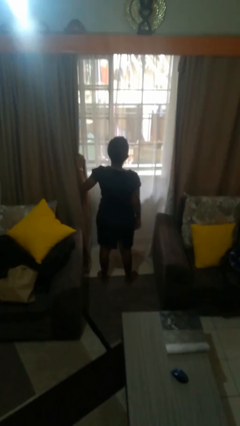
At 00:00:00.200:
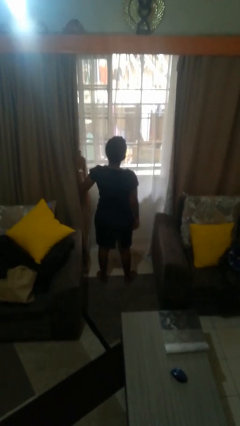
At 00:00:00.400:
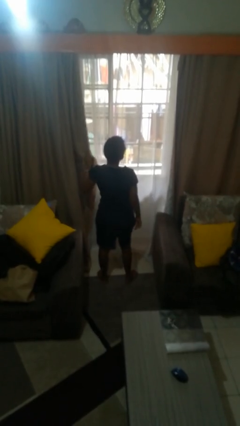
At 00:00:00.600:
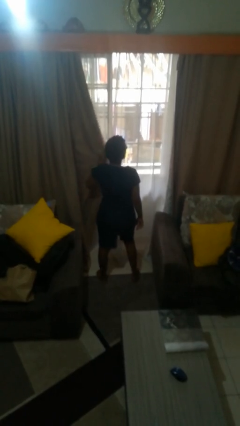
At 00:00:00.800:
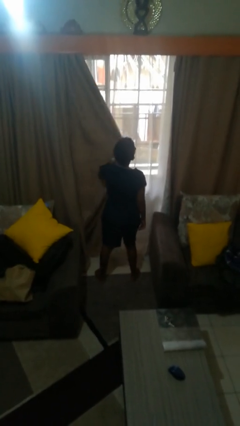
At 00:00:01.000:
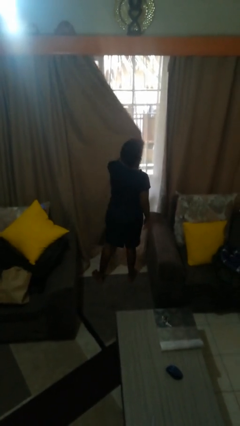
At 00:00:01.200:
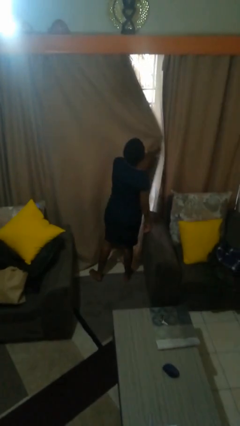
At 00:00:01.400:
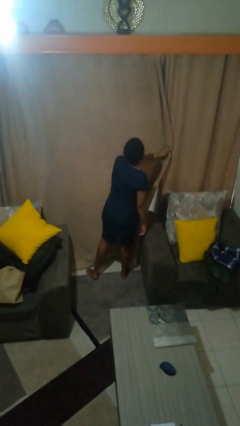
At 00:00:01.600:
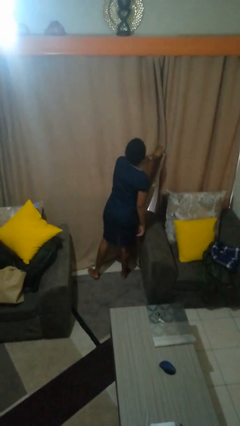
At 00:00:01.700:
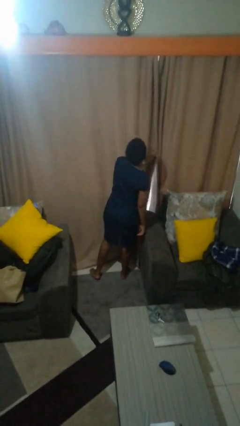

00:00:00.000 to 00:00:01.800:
person closes curtains

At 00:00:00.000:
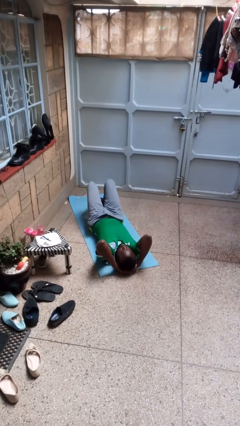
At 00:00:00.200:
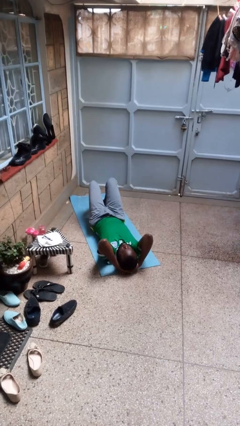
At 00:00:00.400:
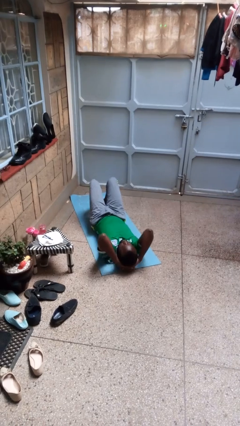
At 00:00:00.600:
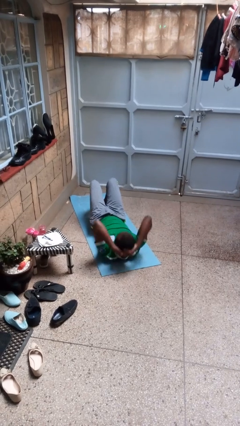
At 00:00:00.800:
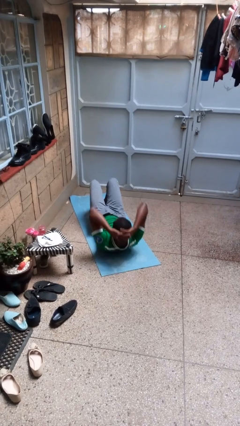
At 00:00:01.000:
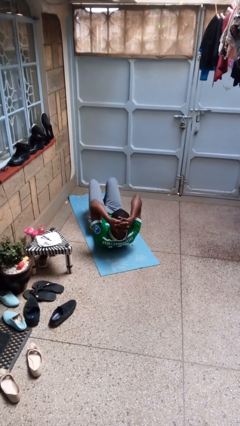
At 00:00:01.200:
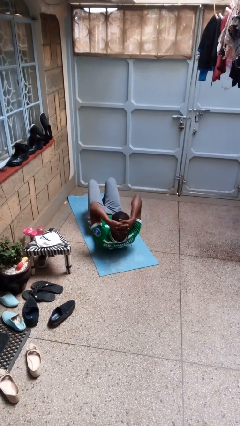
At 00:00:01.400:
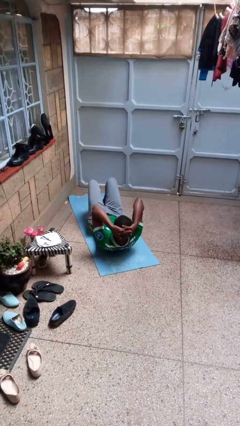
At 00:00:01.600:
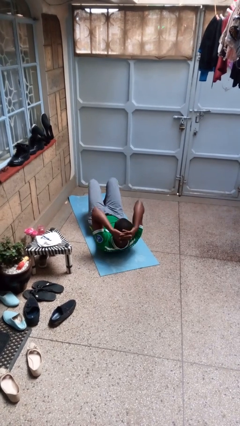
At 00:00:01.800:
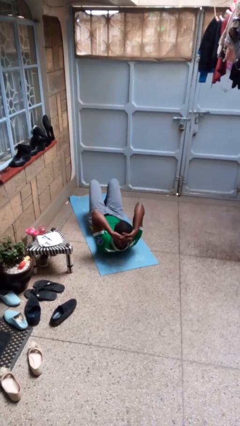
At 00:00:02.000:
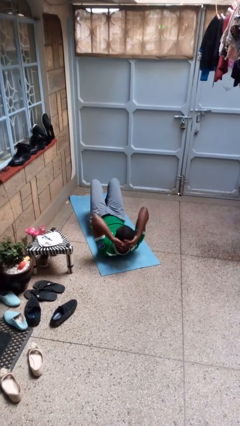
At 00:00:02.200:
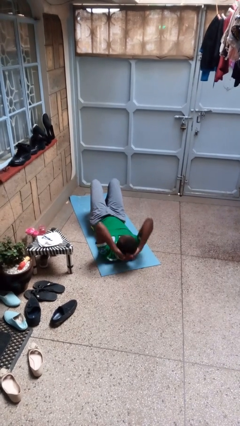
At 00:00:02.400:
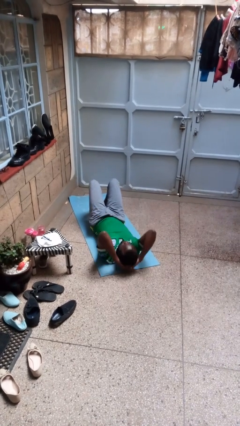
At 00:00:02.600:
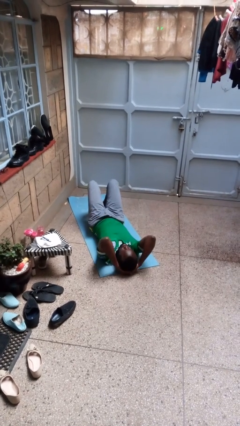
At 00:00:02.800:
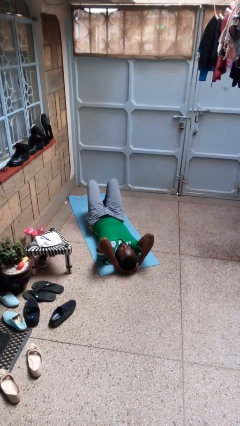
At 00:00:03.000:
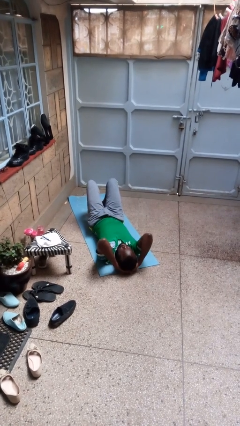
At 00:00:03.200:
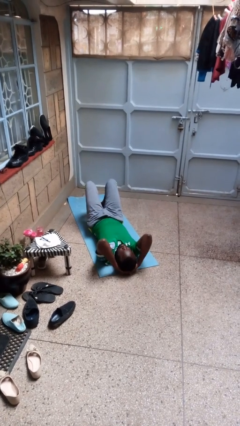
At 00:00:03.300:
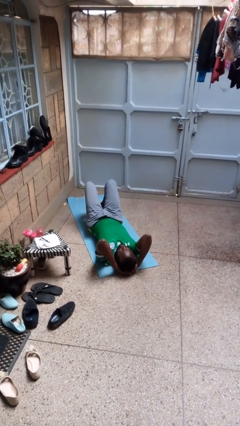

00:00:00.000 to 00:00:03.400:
person exercises with situp

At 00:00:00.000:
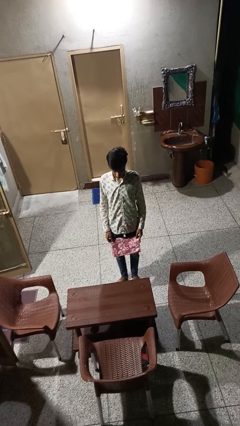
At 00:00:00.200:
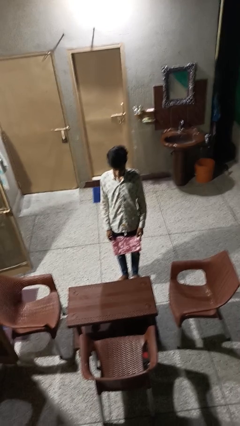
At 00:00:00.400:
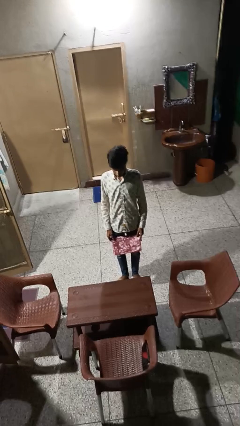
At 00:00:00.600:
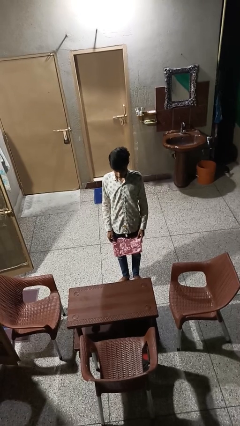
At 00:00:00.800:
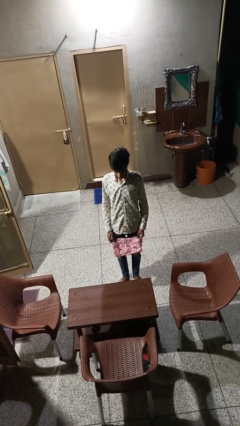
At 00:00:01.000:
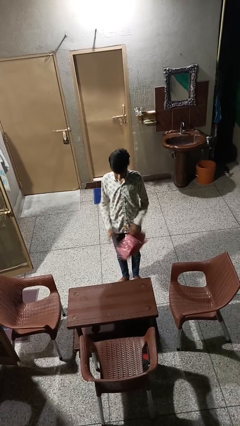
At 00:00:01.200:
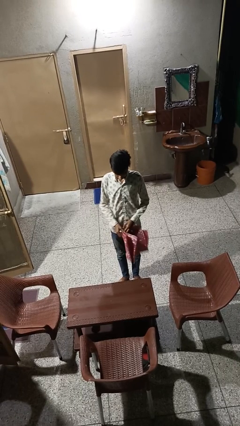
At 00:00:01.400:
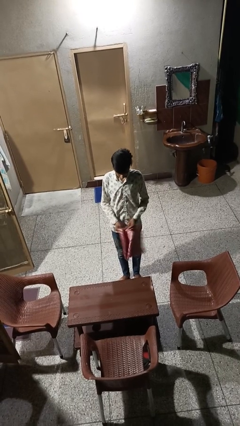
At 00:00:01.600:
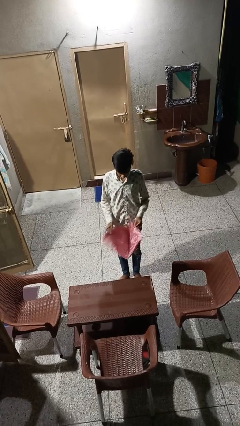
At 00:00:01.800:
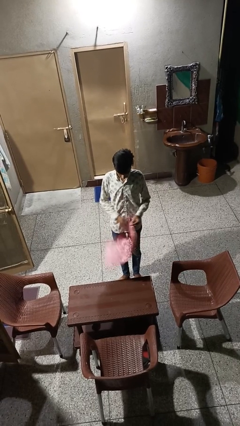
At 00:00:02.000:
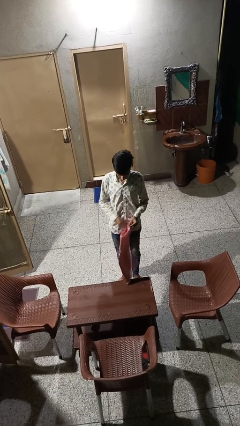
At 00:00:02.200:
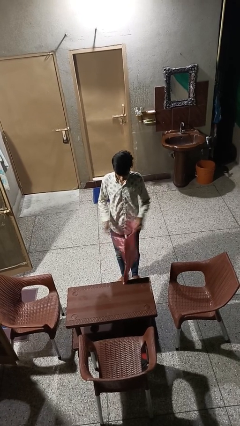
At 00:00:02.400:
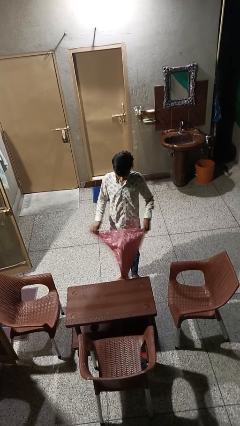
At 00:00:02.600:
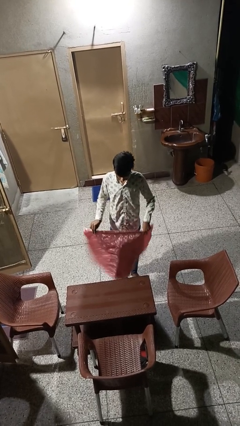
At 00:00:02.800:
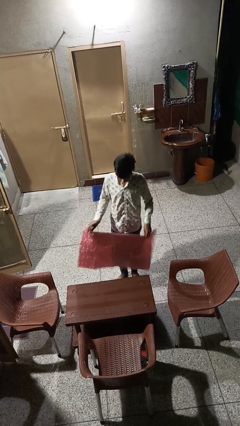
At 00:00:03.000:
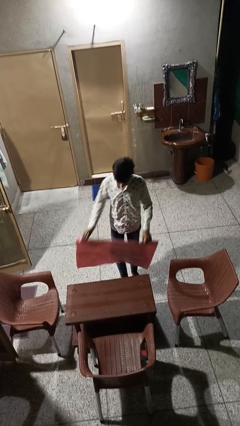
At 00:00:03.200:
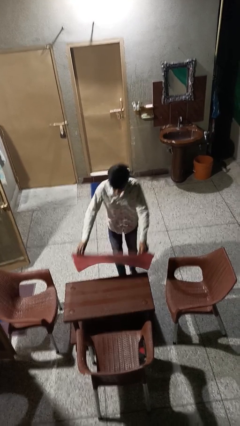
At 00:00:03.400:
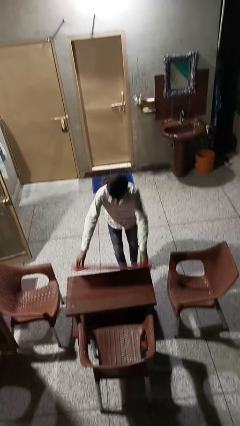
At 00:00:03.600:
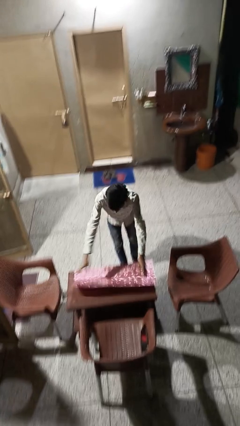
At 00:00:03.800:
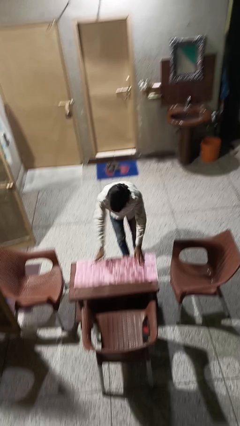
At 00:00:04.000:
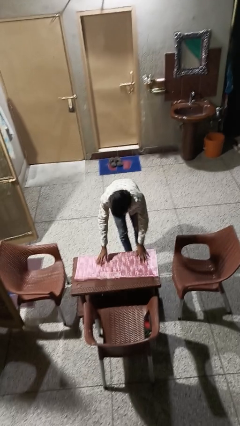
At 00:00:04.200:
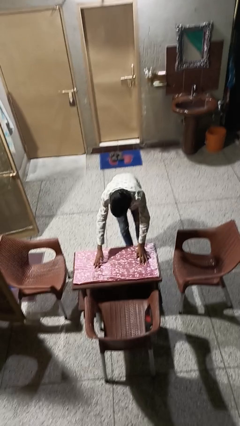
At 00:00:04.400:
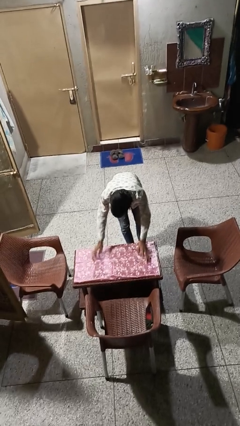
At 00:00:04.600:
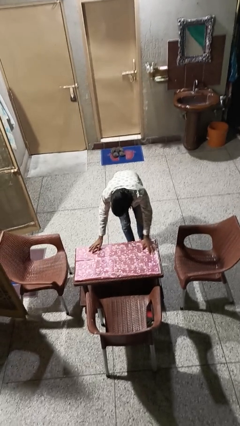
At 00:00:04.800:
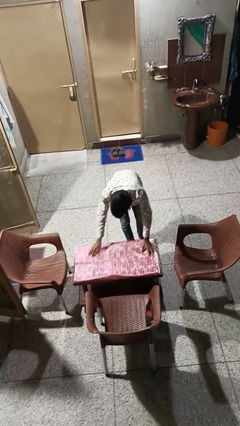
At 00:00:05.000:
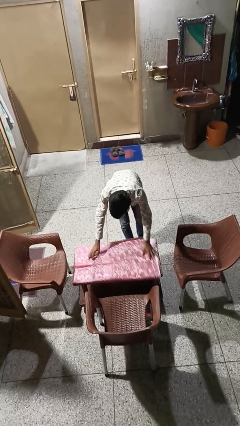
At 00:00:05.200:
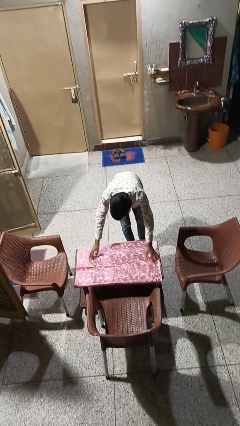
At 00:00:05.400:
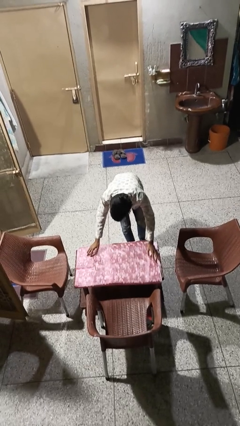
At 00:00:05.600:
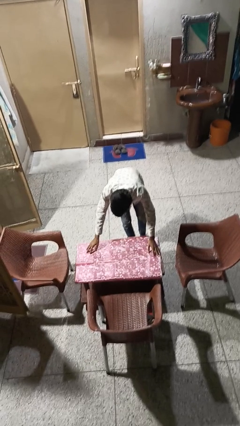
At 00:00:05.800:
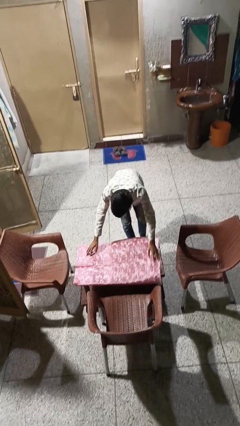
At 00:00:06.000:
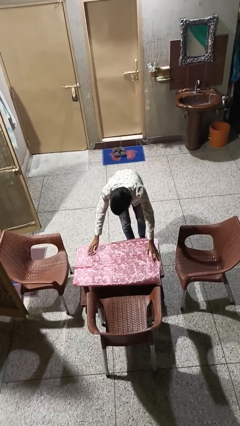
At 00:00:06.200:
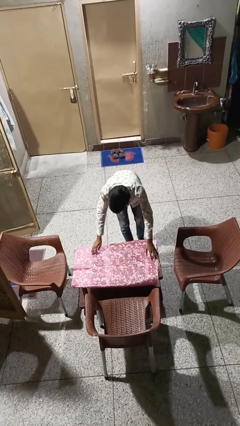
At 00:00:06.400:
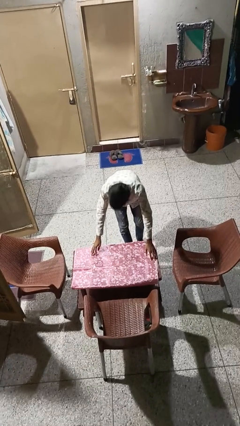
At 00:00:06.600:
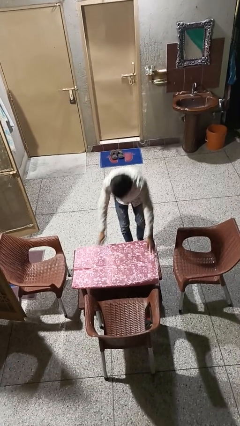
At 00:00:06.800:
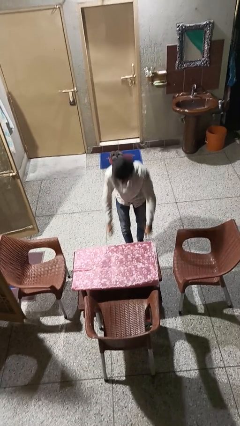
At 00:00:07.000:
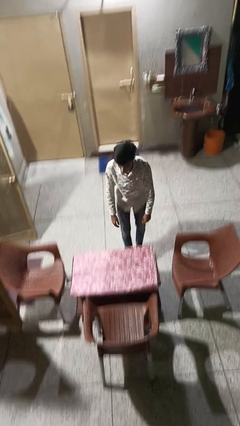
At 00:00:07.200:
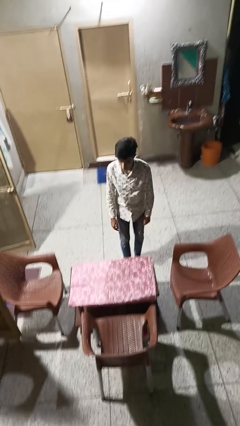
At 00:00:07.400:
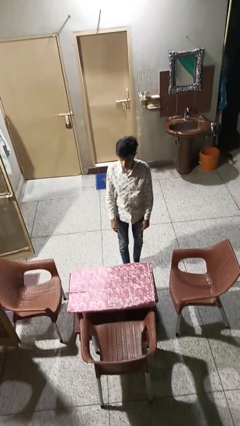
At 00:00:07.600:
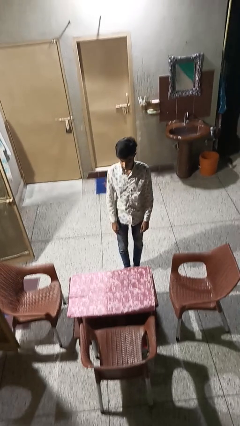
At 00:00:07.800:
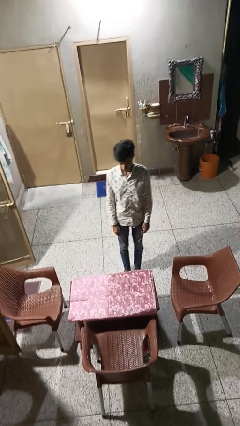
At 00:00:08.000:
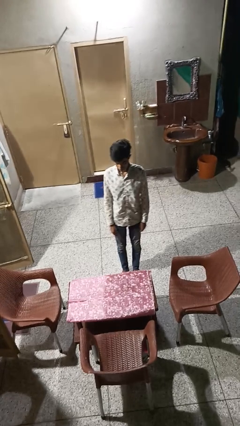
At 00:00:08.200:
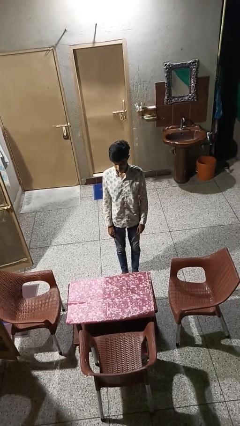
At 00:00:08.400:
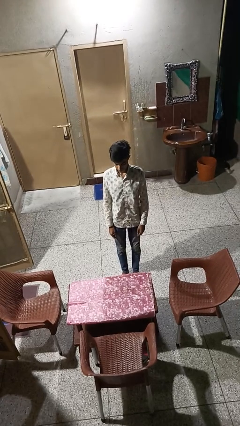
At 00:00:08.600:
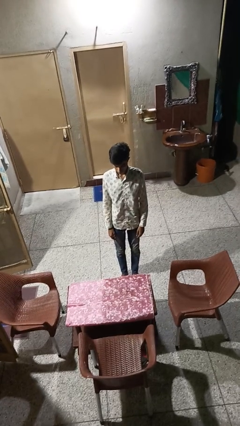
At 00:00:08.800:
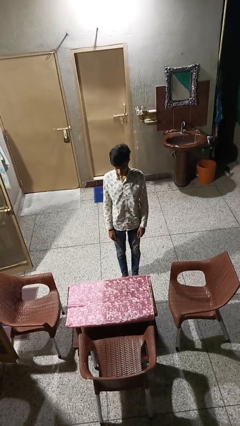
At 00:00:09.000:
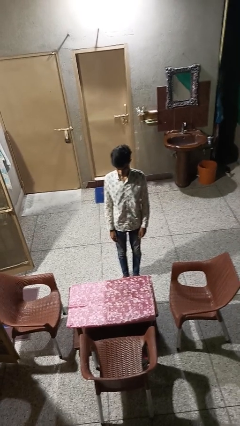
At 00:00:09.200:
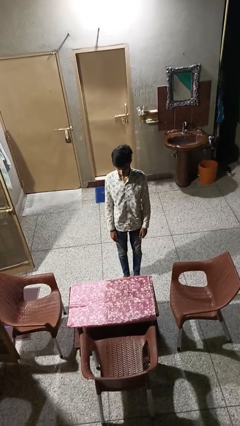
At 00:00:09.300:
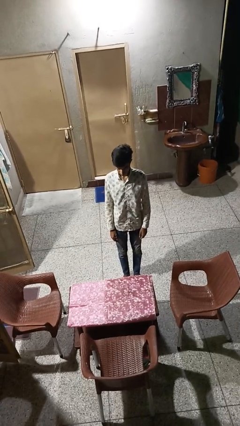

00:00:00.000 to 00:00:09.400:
person spreads tablecloth

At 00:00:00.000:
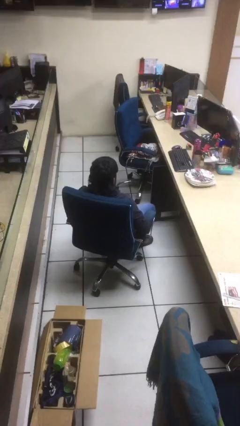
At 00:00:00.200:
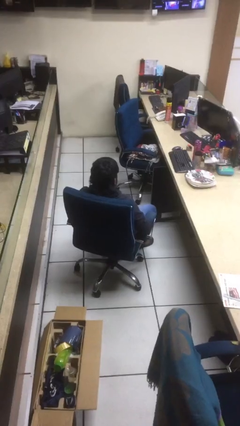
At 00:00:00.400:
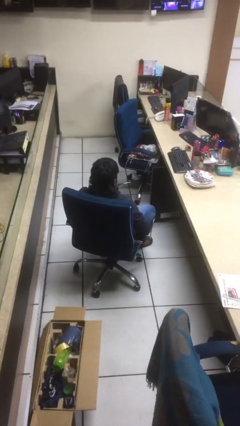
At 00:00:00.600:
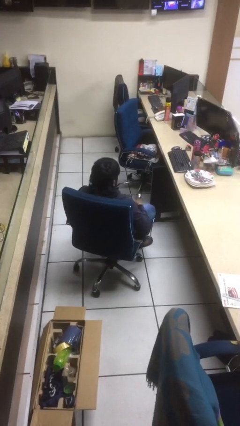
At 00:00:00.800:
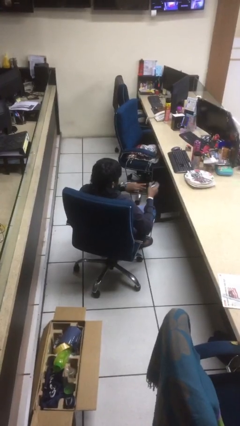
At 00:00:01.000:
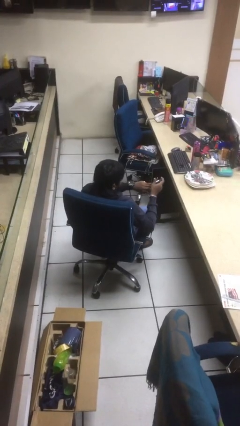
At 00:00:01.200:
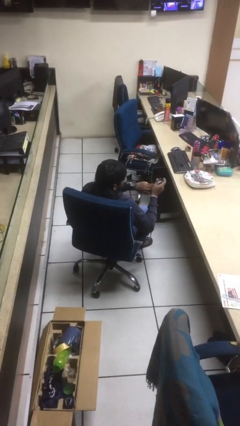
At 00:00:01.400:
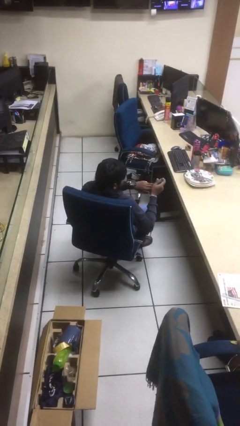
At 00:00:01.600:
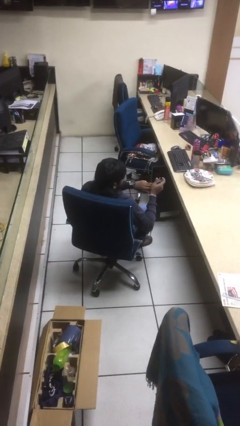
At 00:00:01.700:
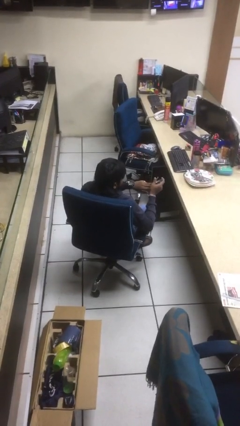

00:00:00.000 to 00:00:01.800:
person clips fingernails

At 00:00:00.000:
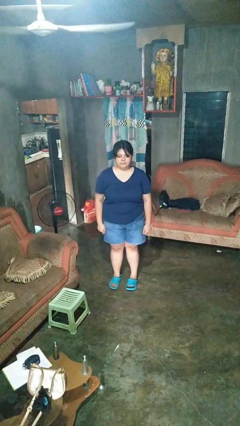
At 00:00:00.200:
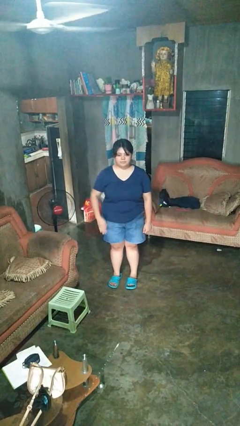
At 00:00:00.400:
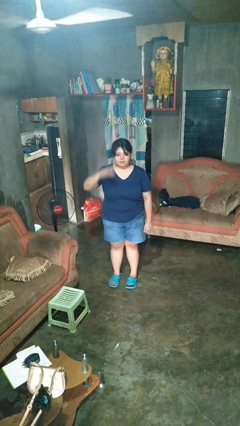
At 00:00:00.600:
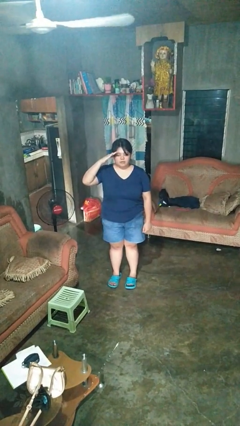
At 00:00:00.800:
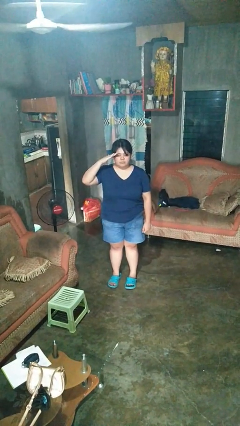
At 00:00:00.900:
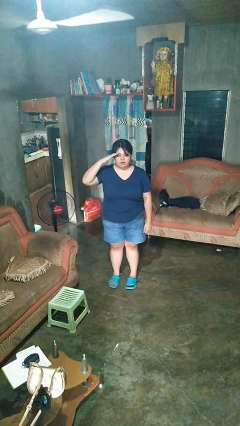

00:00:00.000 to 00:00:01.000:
person salutes
